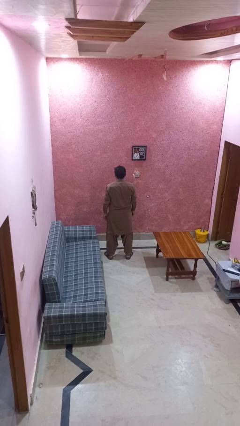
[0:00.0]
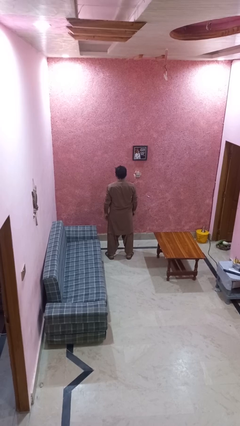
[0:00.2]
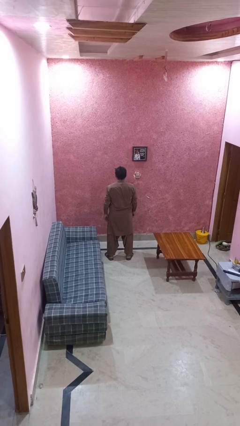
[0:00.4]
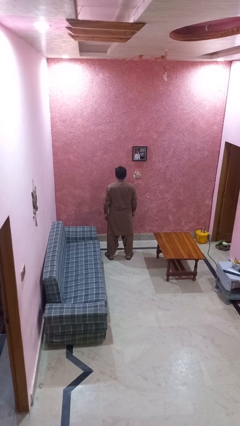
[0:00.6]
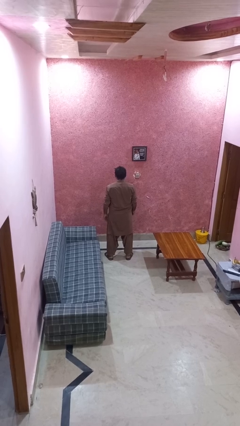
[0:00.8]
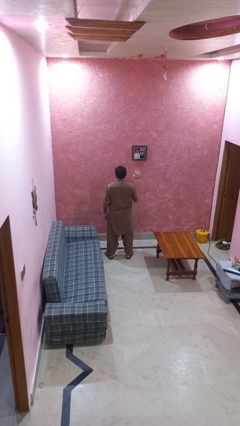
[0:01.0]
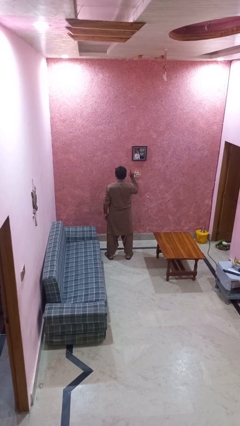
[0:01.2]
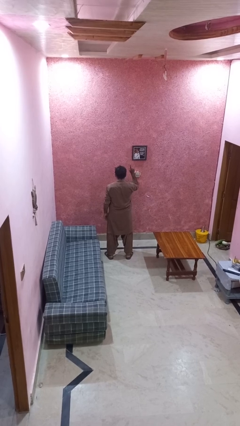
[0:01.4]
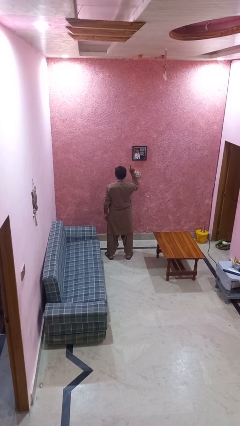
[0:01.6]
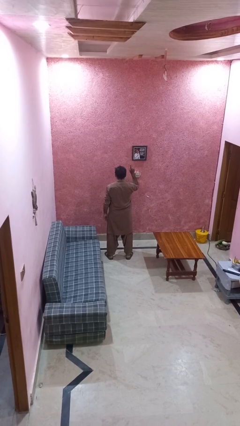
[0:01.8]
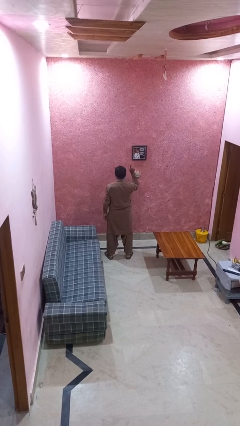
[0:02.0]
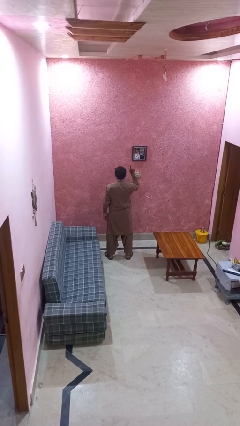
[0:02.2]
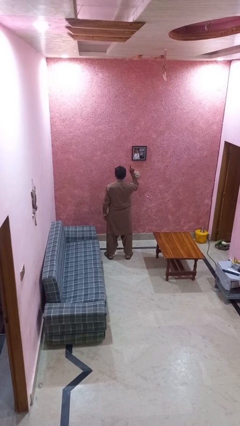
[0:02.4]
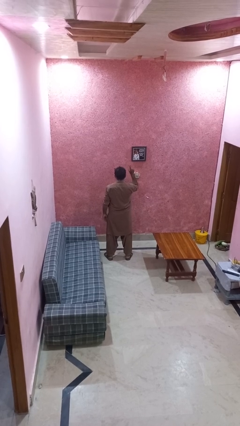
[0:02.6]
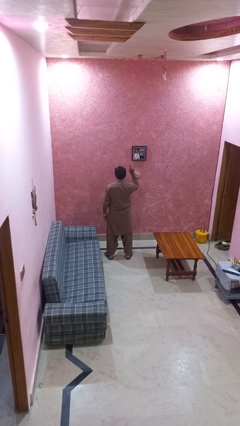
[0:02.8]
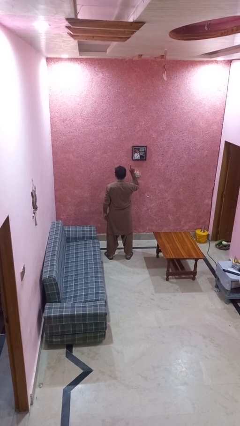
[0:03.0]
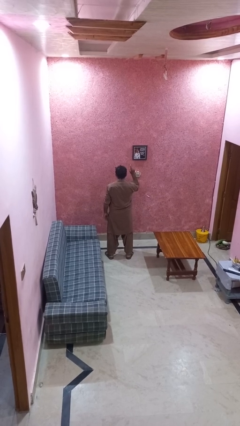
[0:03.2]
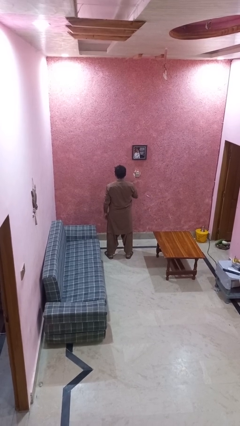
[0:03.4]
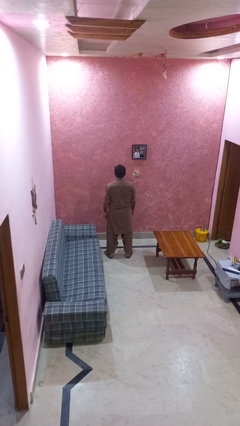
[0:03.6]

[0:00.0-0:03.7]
person gestures number one

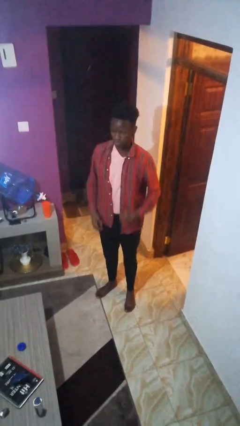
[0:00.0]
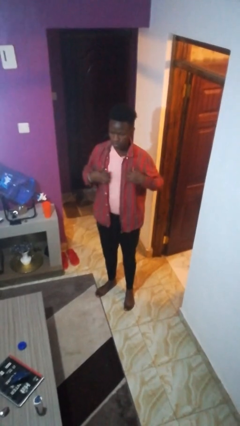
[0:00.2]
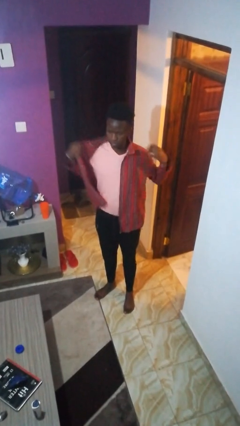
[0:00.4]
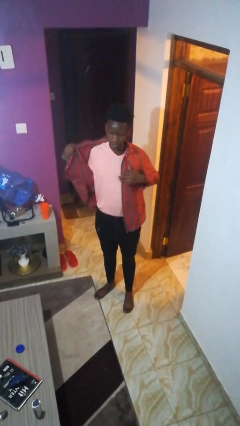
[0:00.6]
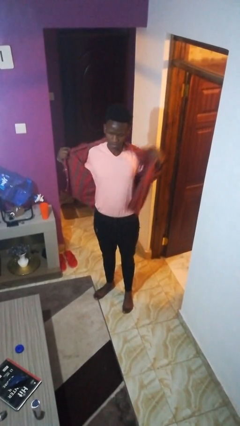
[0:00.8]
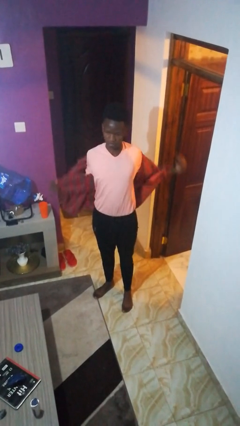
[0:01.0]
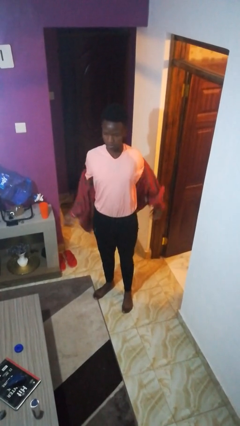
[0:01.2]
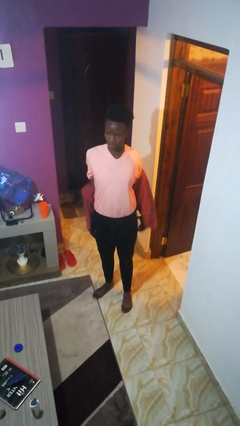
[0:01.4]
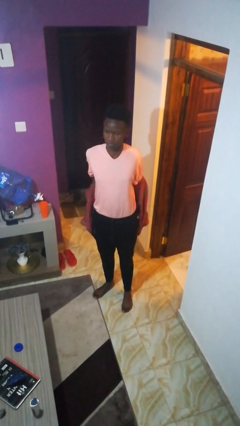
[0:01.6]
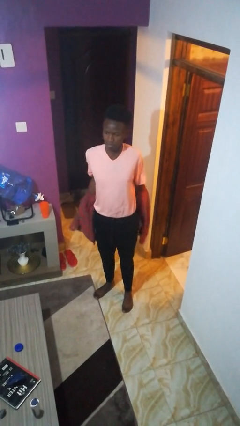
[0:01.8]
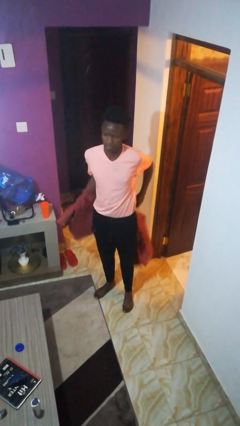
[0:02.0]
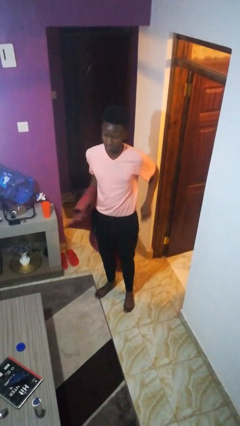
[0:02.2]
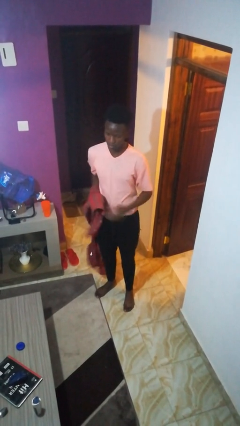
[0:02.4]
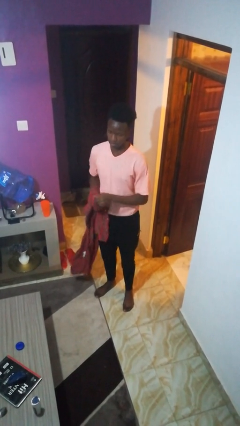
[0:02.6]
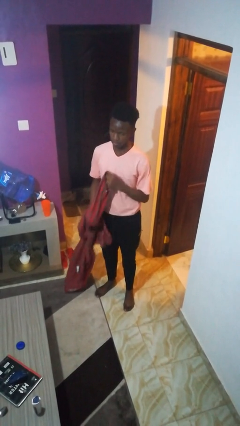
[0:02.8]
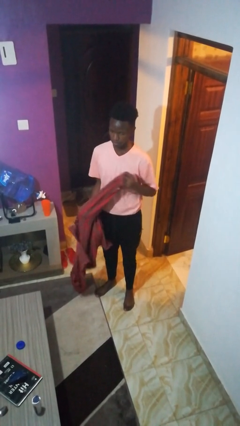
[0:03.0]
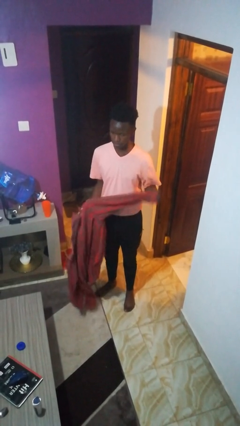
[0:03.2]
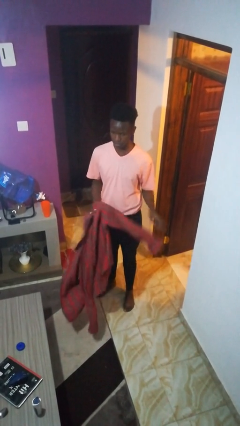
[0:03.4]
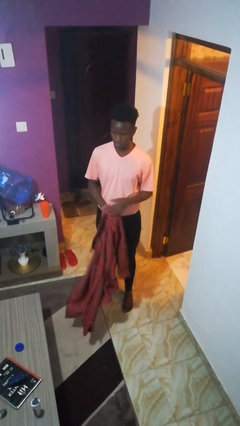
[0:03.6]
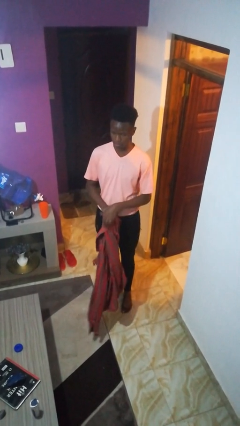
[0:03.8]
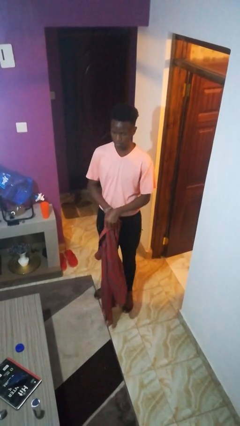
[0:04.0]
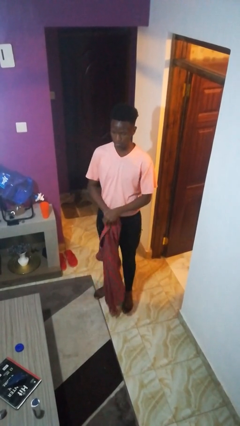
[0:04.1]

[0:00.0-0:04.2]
person takes off shirt

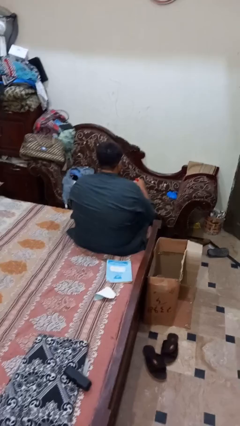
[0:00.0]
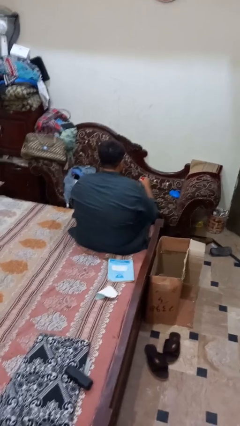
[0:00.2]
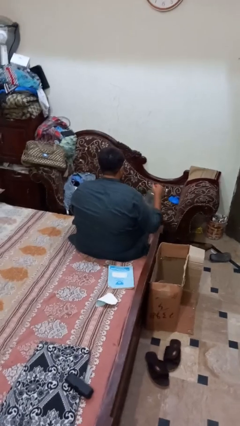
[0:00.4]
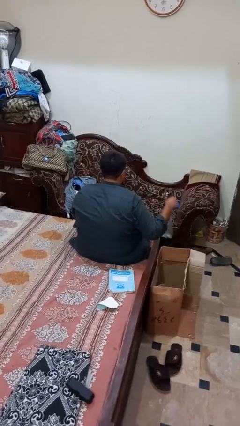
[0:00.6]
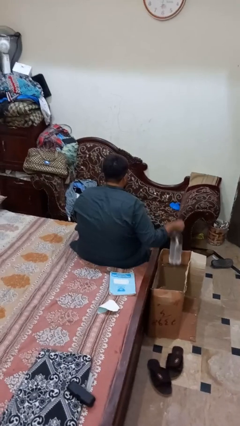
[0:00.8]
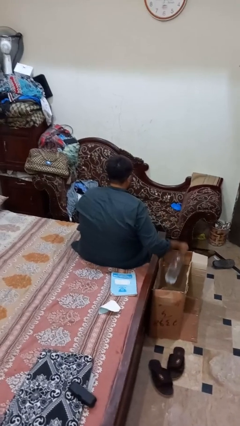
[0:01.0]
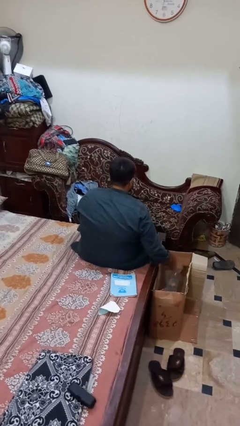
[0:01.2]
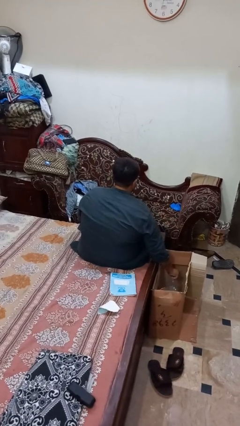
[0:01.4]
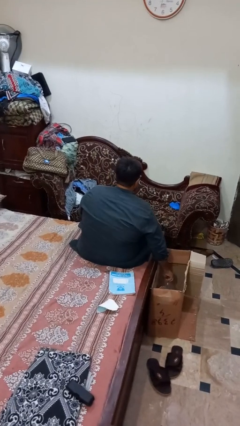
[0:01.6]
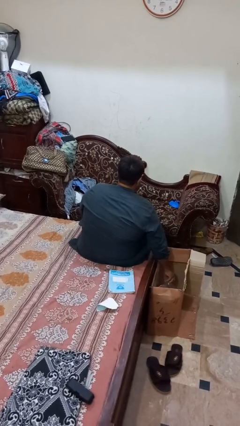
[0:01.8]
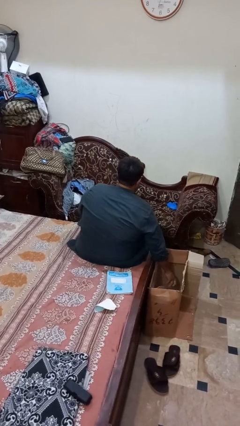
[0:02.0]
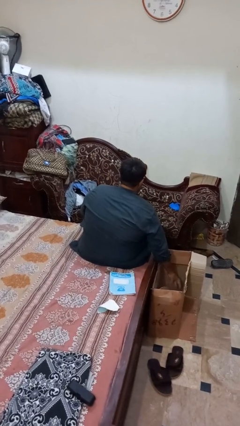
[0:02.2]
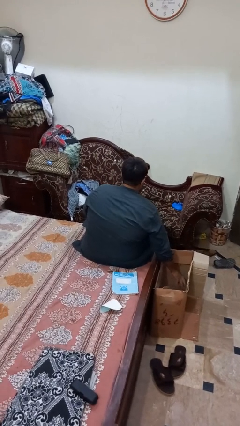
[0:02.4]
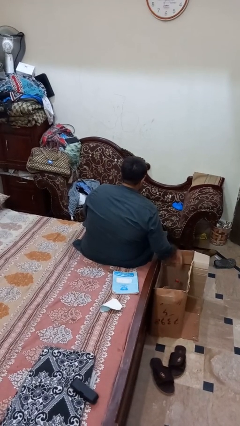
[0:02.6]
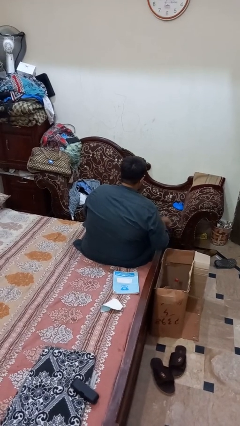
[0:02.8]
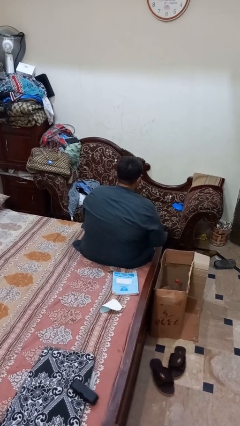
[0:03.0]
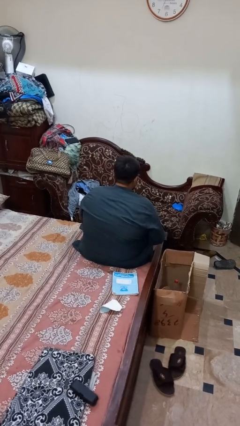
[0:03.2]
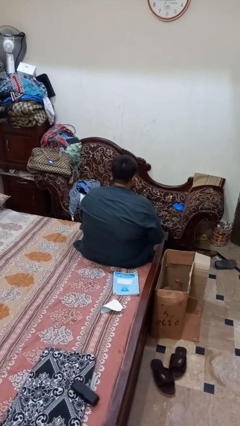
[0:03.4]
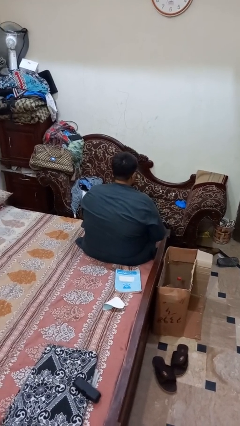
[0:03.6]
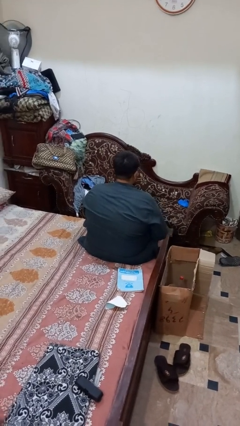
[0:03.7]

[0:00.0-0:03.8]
person puts object into box

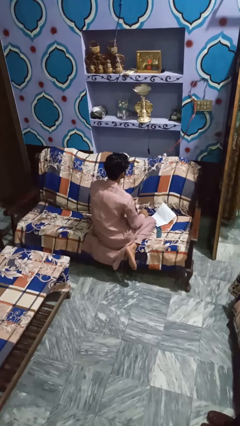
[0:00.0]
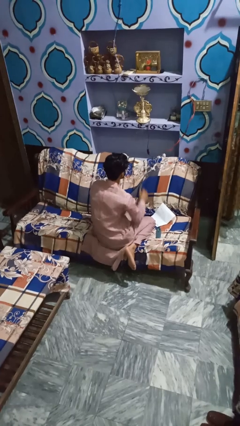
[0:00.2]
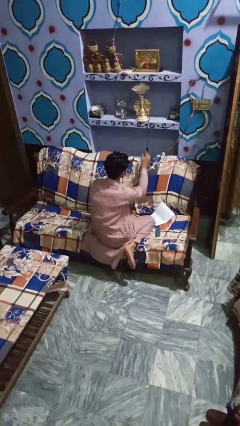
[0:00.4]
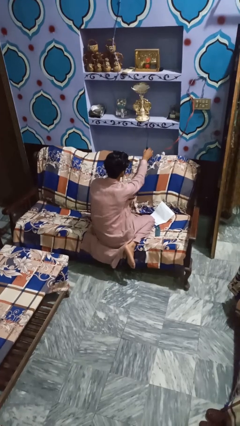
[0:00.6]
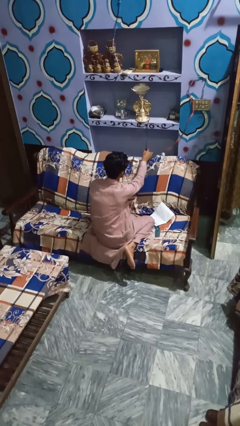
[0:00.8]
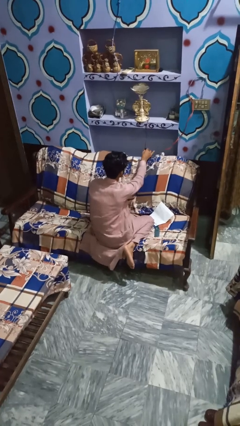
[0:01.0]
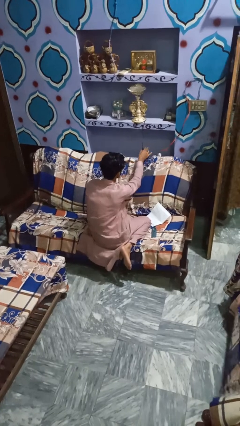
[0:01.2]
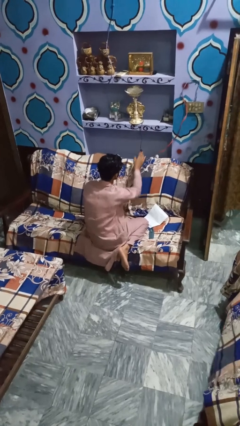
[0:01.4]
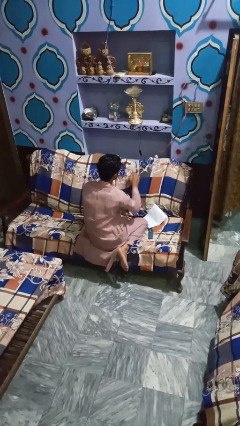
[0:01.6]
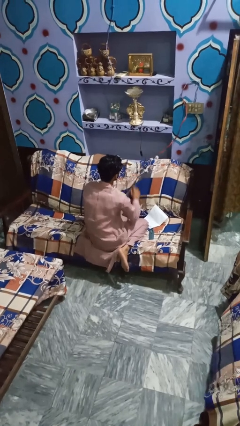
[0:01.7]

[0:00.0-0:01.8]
person turns on lamp

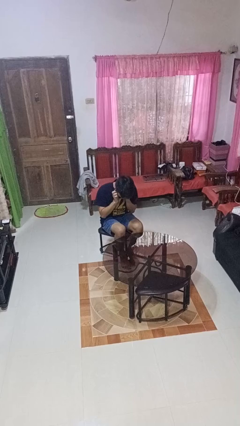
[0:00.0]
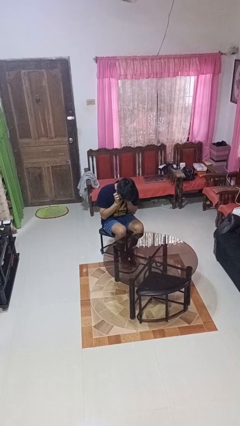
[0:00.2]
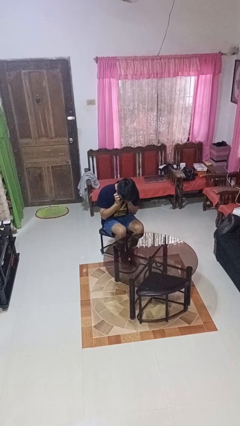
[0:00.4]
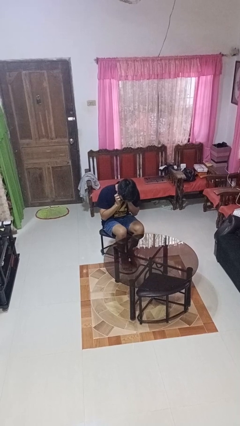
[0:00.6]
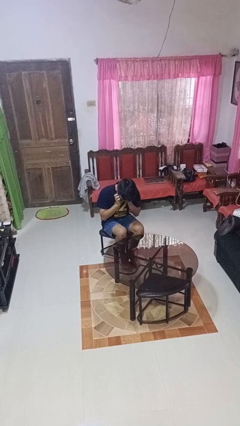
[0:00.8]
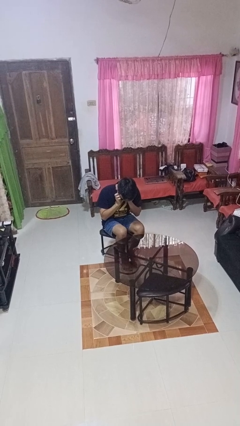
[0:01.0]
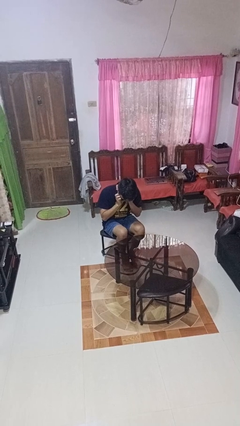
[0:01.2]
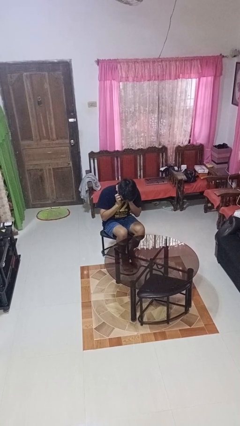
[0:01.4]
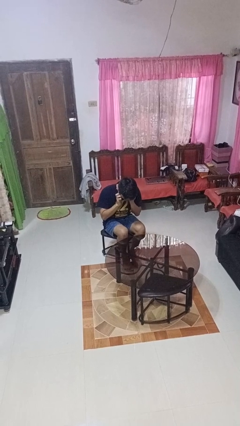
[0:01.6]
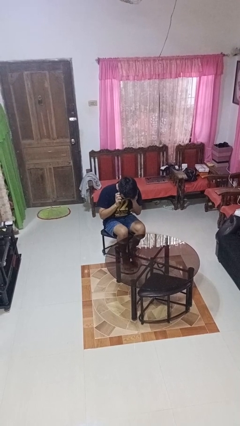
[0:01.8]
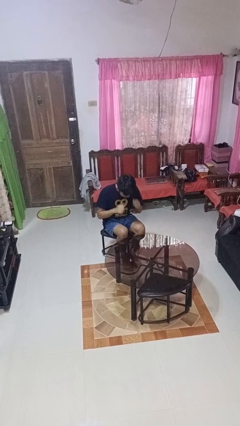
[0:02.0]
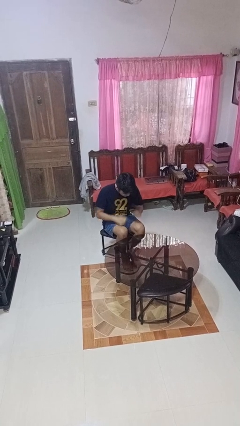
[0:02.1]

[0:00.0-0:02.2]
person puts fingers in ear

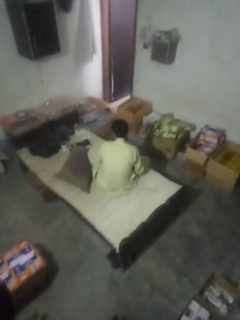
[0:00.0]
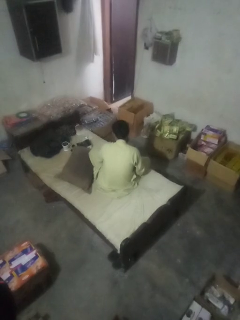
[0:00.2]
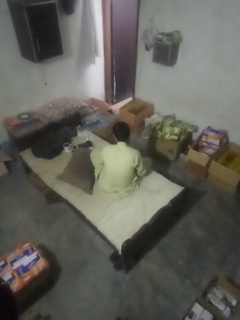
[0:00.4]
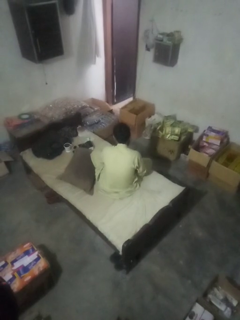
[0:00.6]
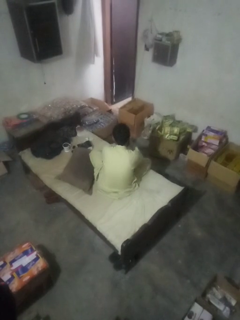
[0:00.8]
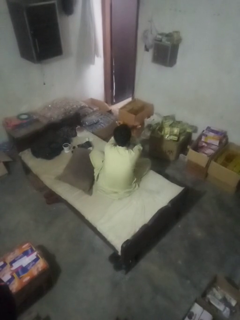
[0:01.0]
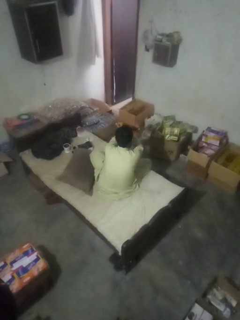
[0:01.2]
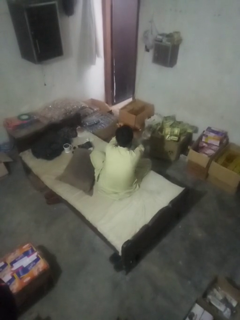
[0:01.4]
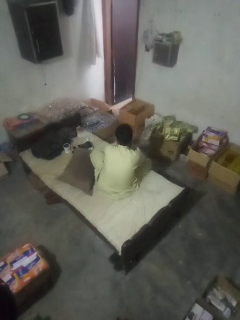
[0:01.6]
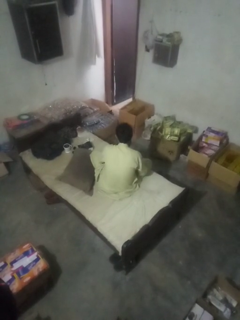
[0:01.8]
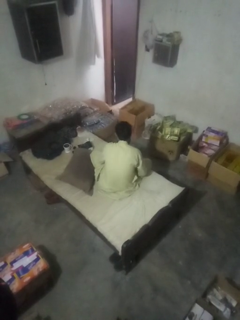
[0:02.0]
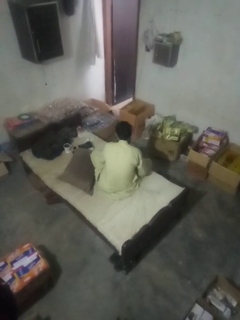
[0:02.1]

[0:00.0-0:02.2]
person gestures arms x

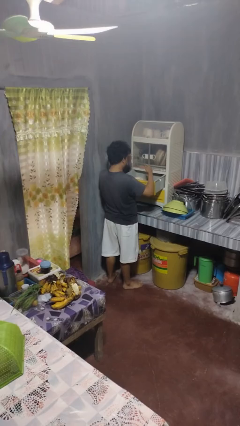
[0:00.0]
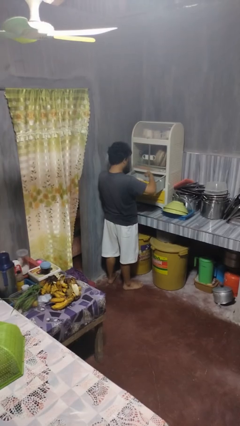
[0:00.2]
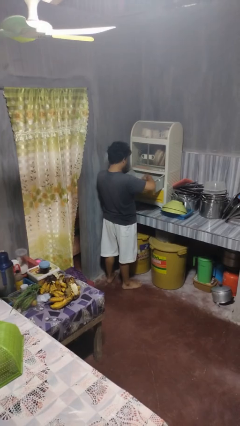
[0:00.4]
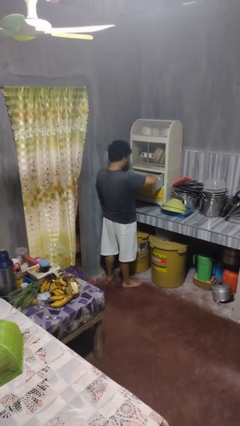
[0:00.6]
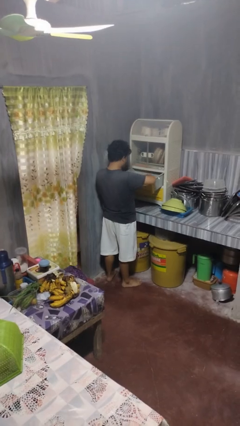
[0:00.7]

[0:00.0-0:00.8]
person puts object into kitchen drawer
